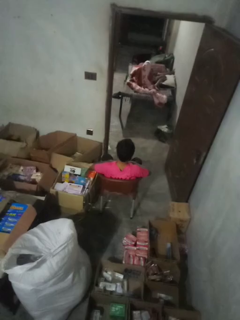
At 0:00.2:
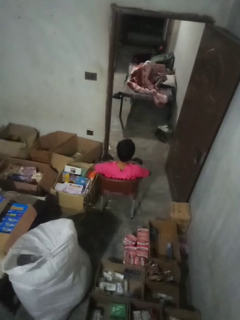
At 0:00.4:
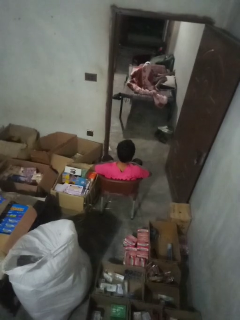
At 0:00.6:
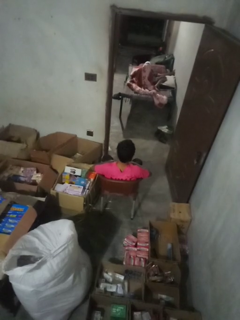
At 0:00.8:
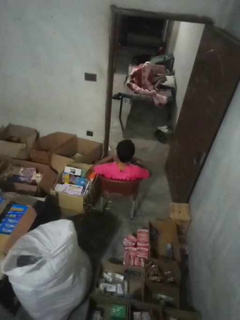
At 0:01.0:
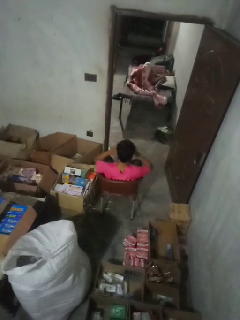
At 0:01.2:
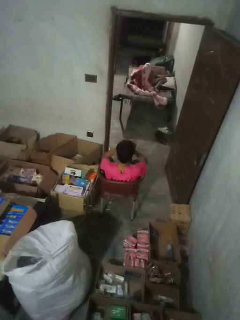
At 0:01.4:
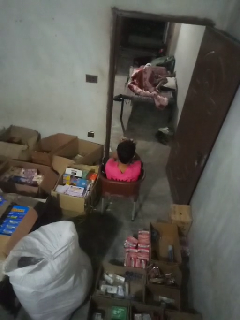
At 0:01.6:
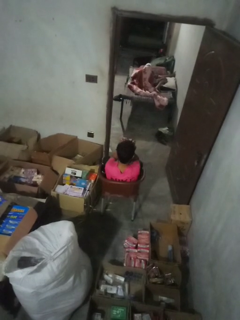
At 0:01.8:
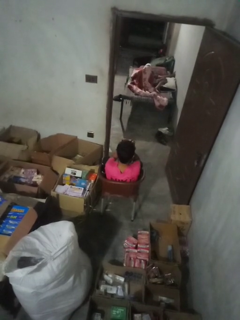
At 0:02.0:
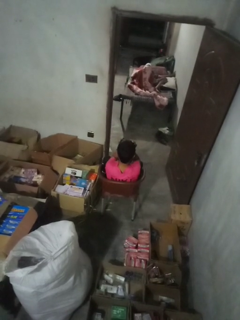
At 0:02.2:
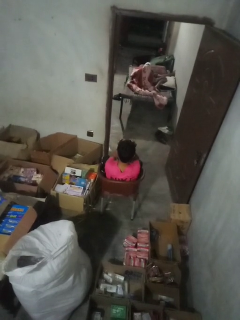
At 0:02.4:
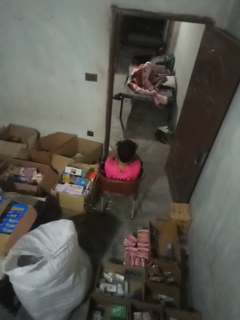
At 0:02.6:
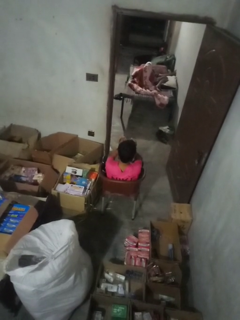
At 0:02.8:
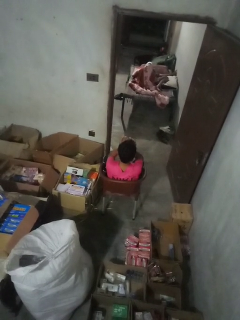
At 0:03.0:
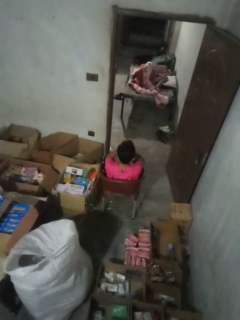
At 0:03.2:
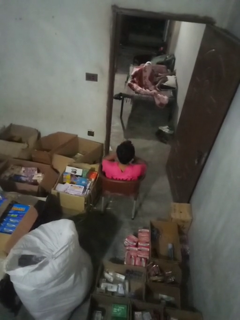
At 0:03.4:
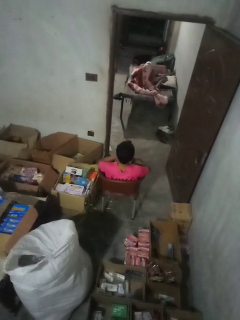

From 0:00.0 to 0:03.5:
person rubs eyes

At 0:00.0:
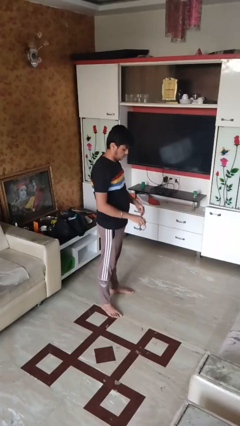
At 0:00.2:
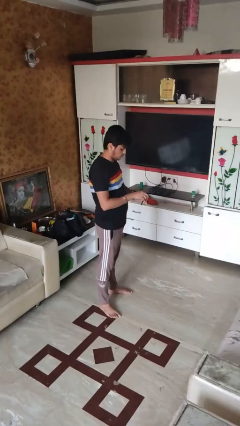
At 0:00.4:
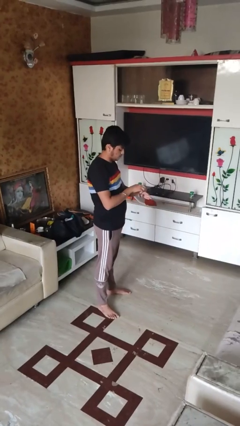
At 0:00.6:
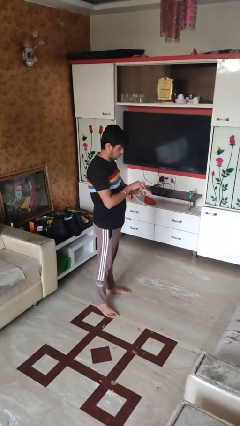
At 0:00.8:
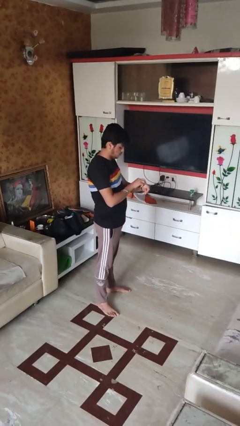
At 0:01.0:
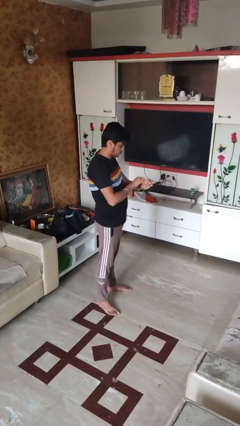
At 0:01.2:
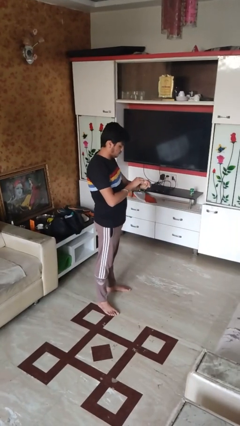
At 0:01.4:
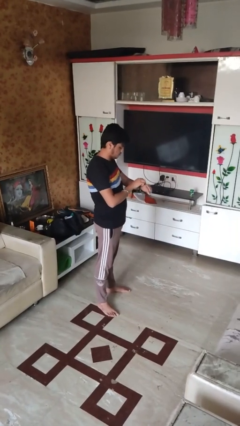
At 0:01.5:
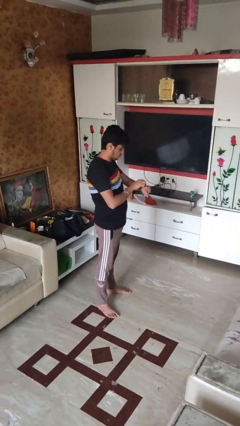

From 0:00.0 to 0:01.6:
person puts on wristwatch

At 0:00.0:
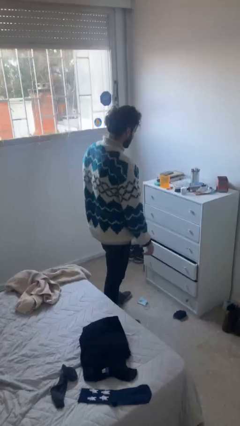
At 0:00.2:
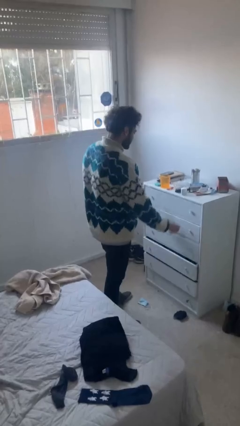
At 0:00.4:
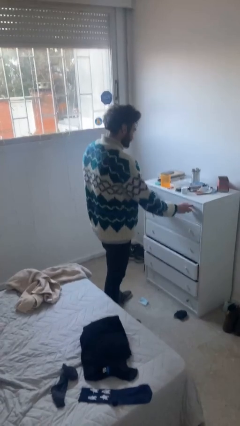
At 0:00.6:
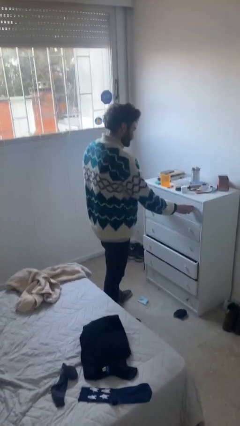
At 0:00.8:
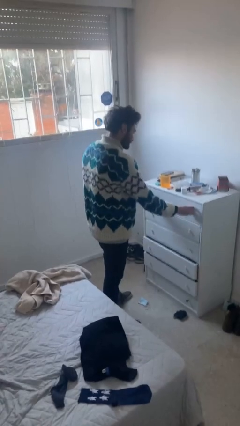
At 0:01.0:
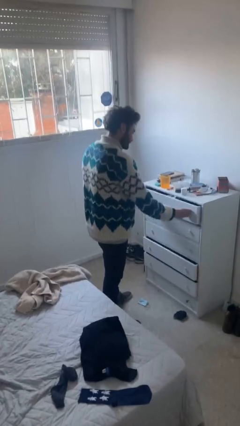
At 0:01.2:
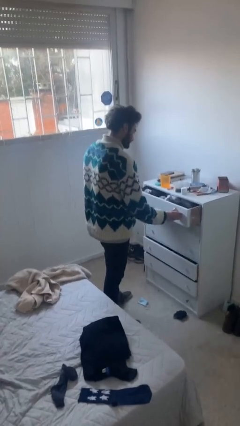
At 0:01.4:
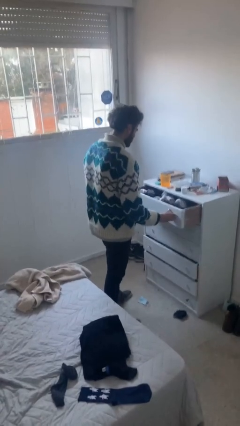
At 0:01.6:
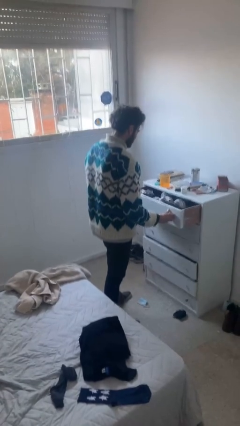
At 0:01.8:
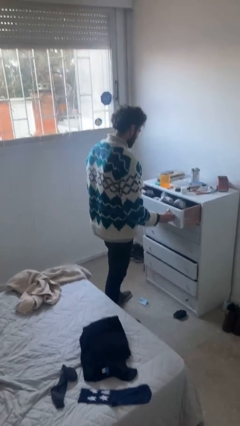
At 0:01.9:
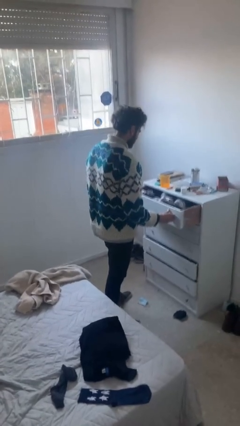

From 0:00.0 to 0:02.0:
person opens dresser drawer

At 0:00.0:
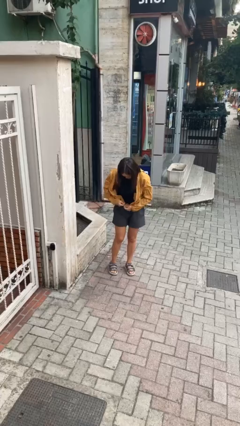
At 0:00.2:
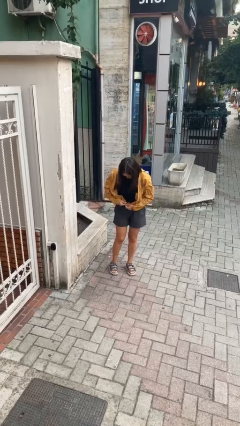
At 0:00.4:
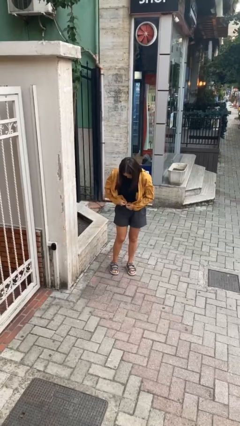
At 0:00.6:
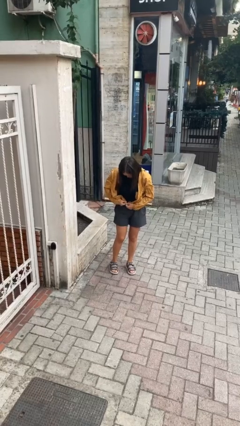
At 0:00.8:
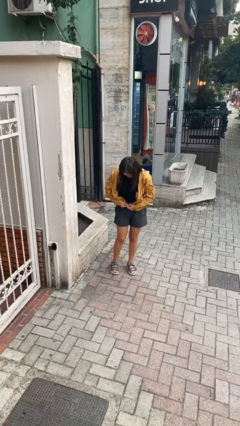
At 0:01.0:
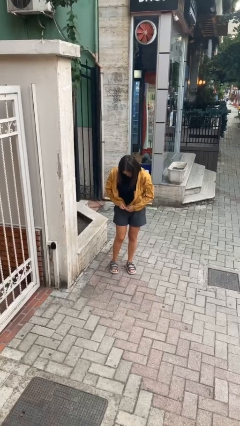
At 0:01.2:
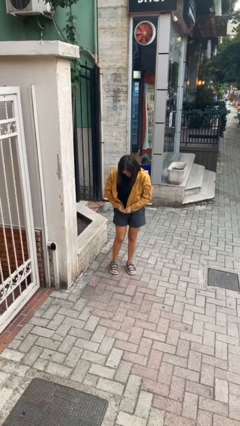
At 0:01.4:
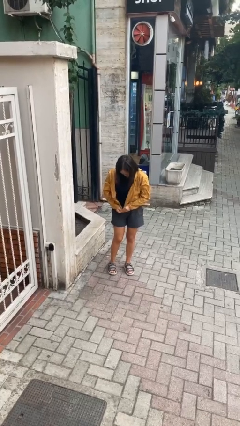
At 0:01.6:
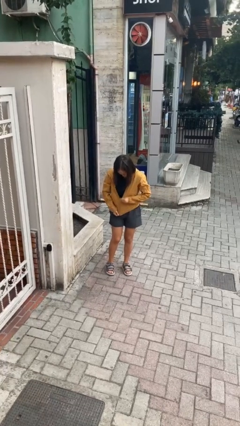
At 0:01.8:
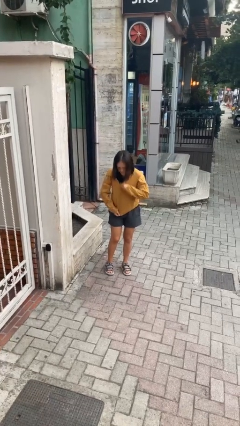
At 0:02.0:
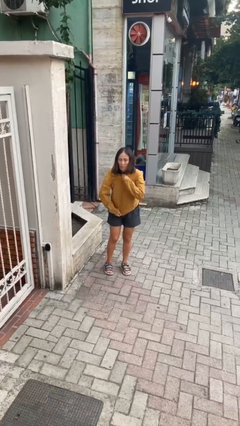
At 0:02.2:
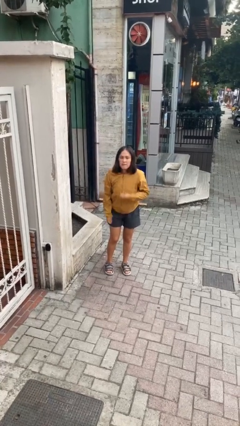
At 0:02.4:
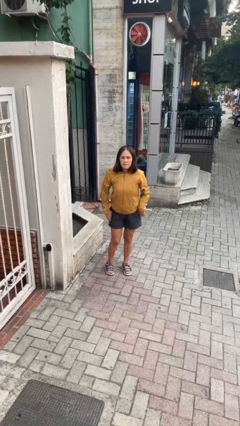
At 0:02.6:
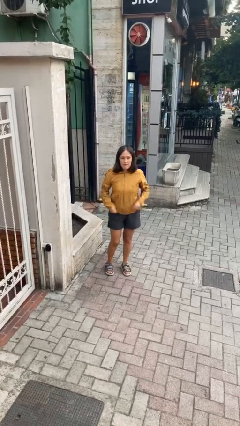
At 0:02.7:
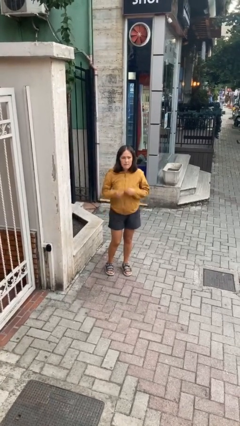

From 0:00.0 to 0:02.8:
person zips up jacket

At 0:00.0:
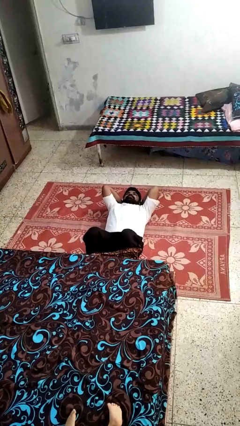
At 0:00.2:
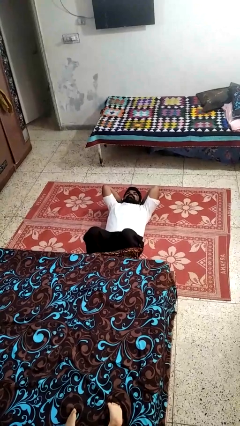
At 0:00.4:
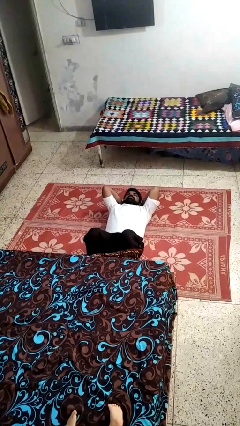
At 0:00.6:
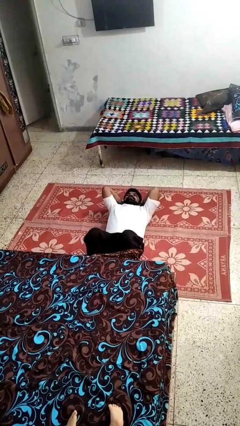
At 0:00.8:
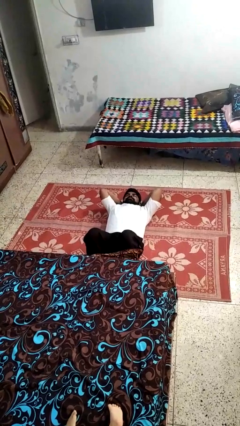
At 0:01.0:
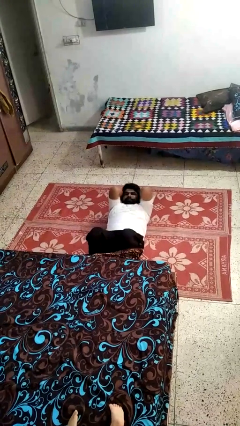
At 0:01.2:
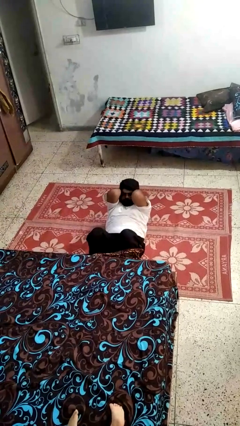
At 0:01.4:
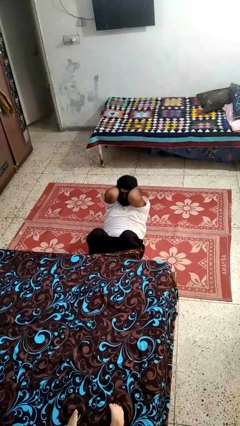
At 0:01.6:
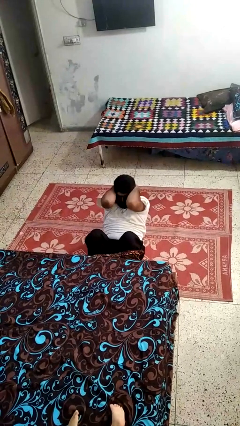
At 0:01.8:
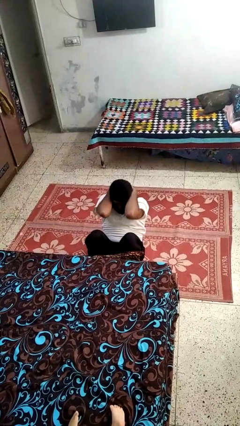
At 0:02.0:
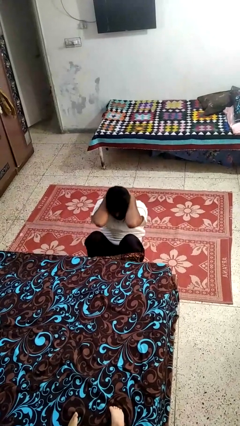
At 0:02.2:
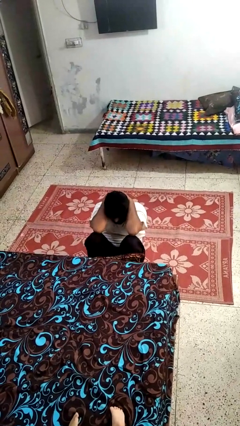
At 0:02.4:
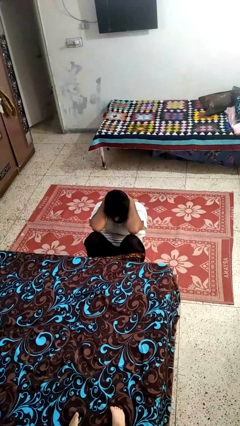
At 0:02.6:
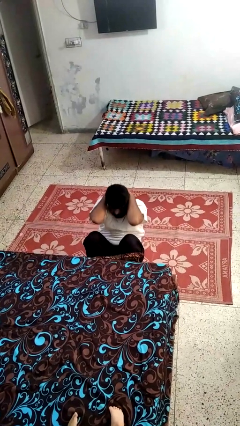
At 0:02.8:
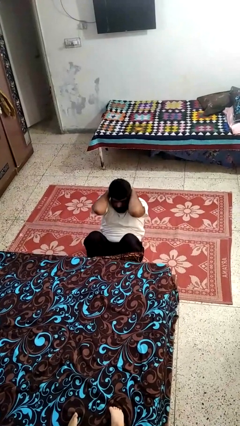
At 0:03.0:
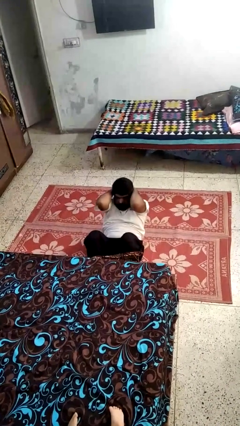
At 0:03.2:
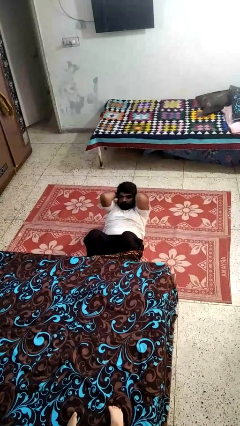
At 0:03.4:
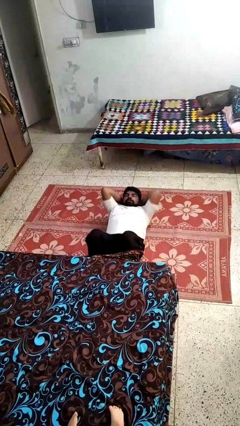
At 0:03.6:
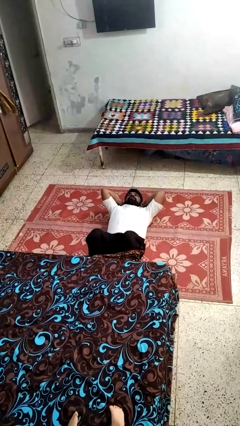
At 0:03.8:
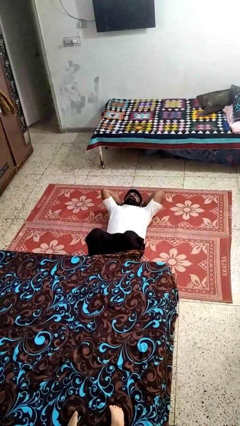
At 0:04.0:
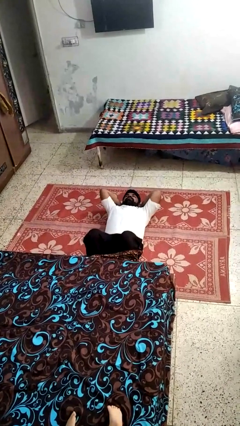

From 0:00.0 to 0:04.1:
person exercises with situp

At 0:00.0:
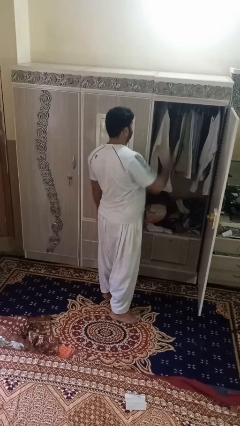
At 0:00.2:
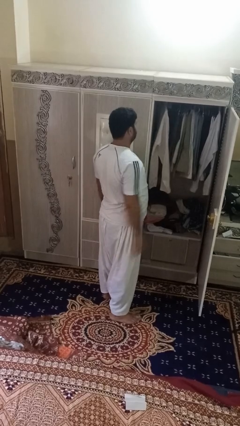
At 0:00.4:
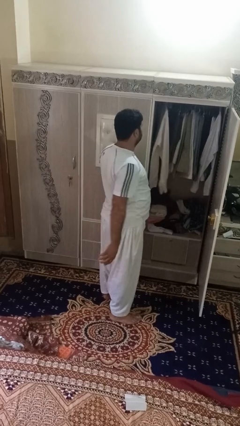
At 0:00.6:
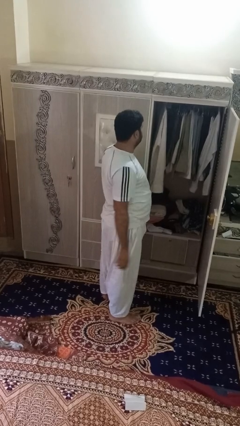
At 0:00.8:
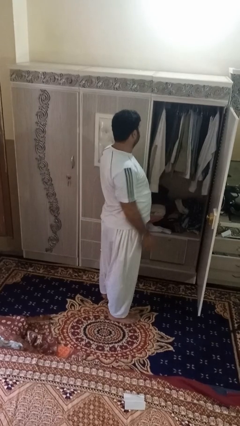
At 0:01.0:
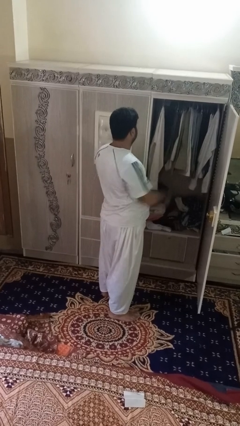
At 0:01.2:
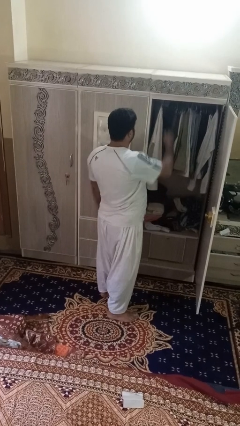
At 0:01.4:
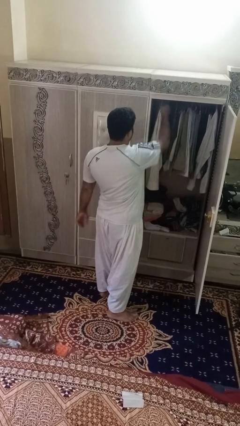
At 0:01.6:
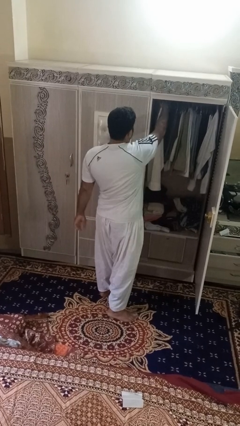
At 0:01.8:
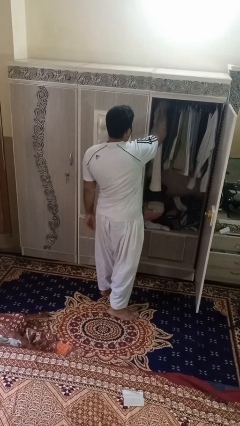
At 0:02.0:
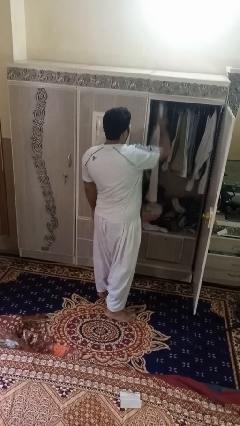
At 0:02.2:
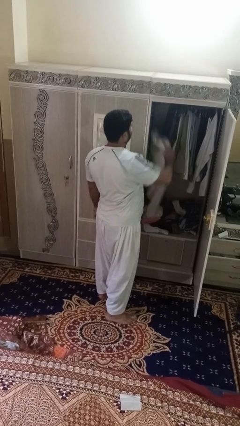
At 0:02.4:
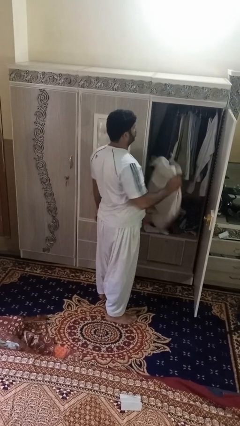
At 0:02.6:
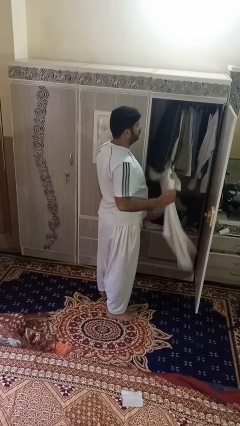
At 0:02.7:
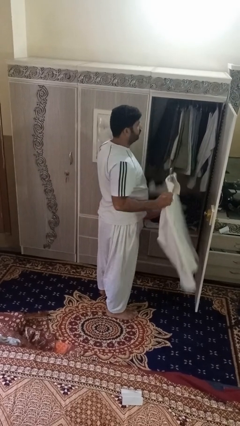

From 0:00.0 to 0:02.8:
person takes clothes from closet

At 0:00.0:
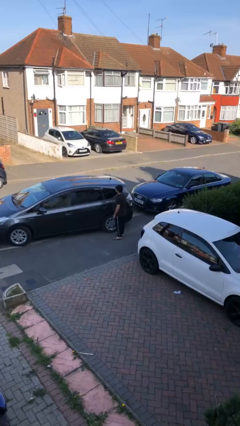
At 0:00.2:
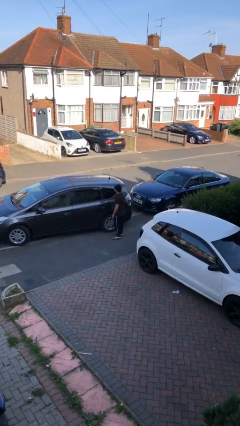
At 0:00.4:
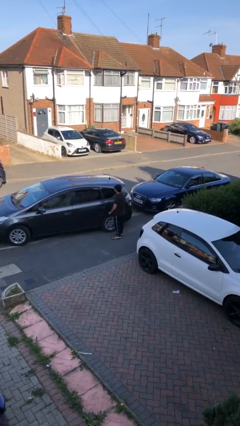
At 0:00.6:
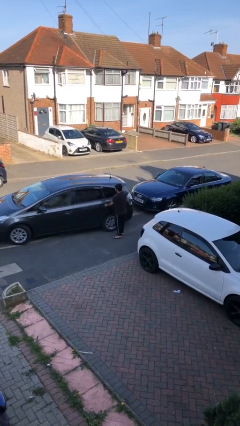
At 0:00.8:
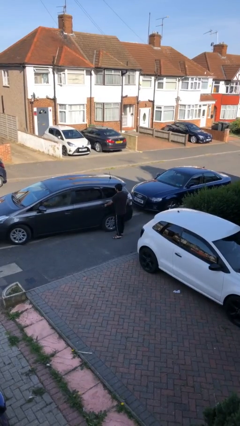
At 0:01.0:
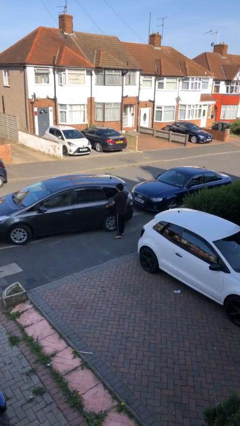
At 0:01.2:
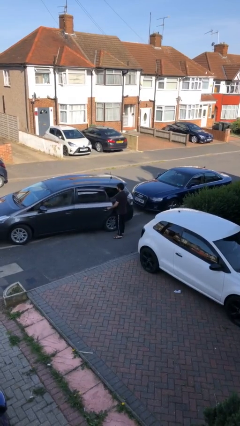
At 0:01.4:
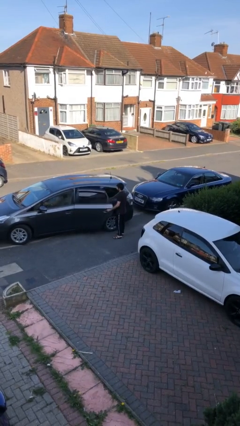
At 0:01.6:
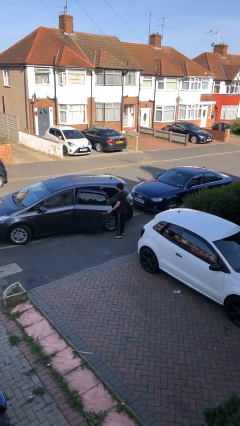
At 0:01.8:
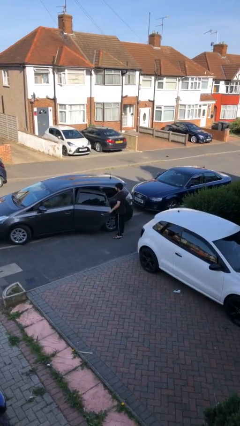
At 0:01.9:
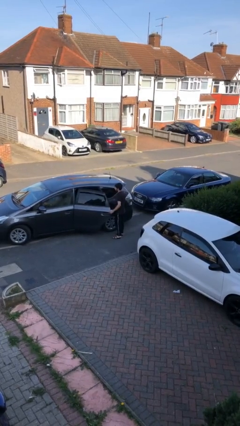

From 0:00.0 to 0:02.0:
person opens car door
